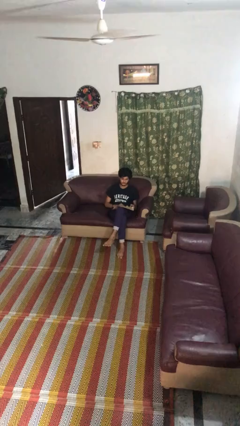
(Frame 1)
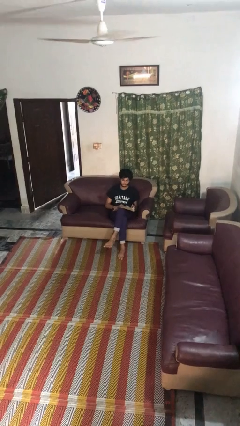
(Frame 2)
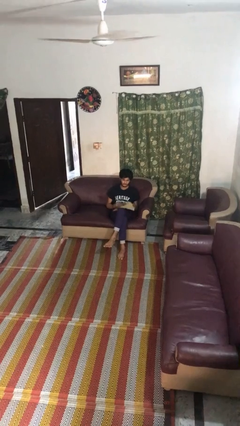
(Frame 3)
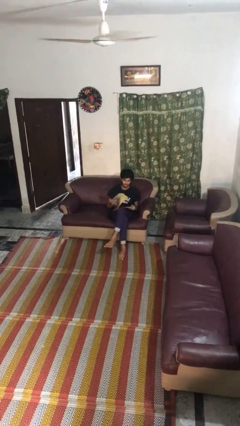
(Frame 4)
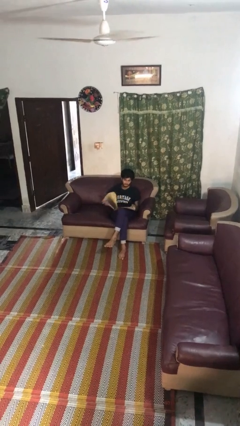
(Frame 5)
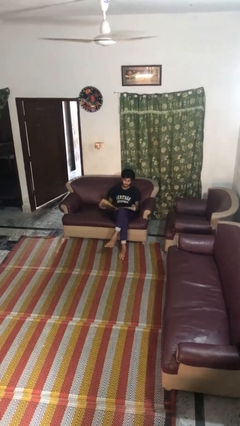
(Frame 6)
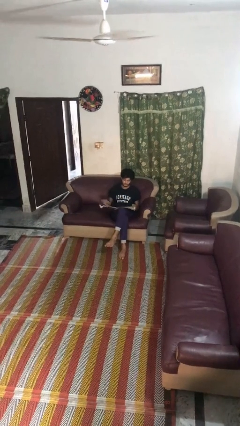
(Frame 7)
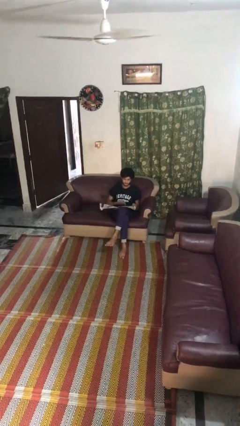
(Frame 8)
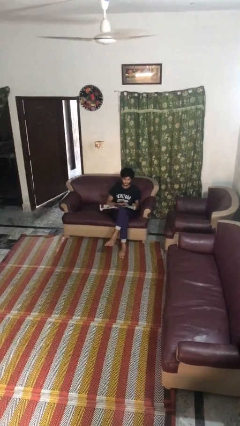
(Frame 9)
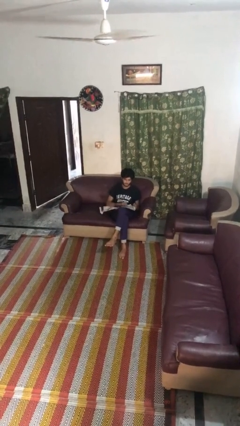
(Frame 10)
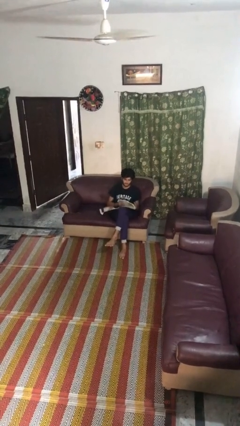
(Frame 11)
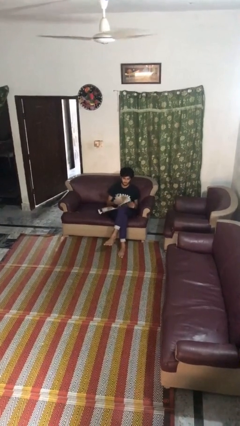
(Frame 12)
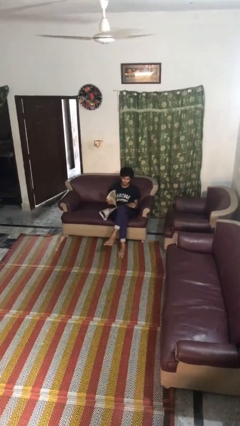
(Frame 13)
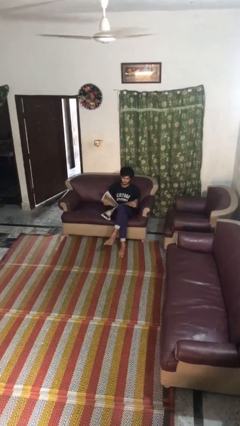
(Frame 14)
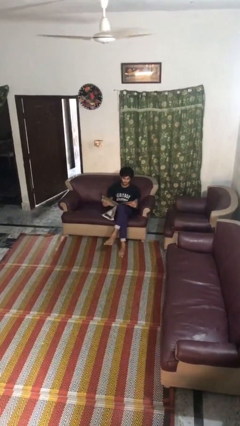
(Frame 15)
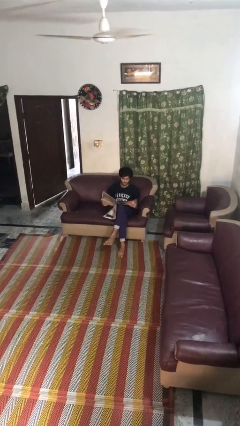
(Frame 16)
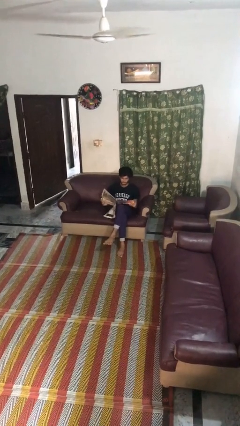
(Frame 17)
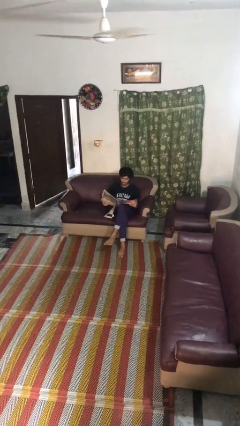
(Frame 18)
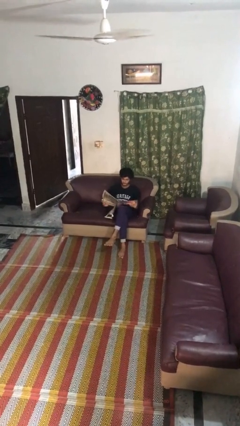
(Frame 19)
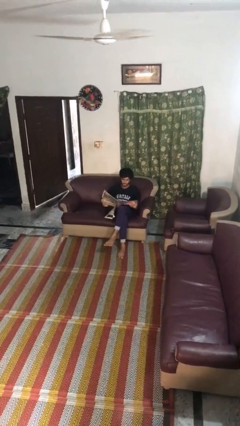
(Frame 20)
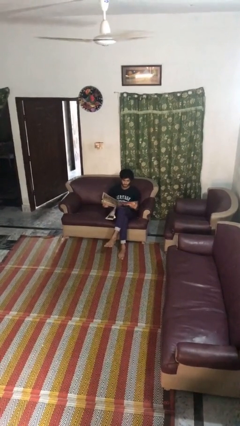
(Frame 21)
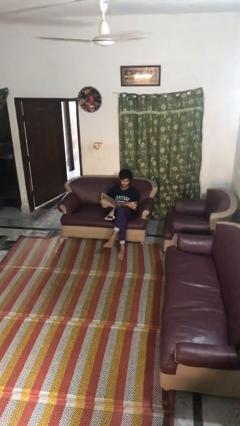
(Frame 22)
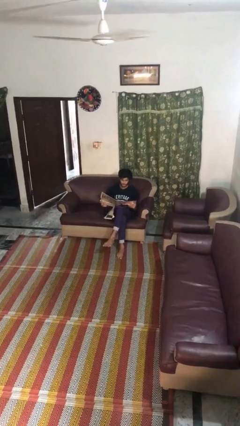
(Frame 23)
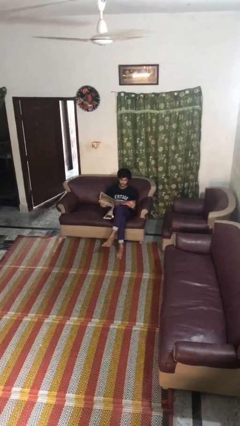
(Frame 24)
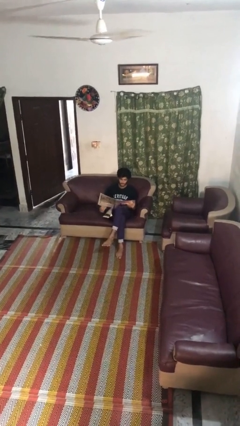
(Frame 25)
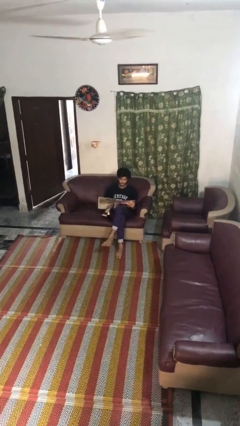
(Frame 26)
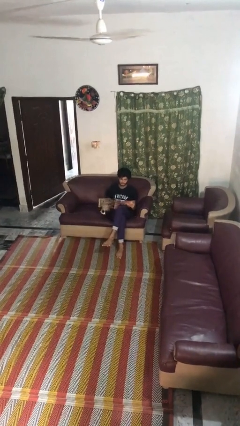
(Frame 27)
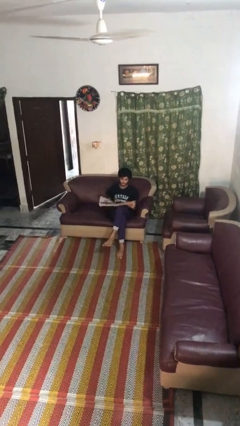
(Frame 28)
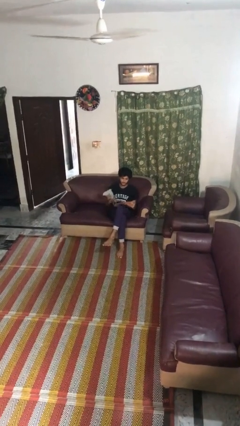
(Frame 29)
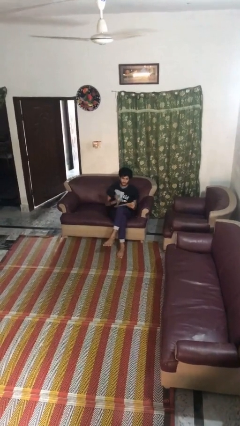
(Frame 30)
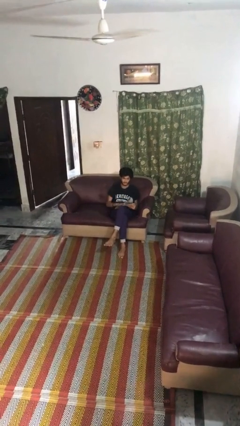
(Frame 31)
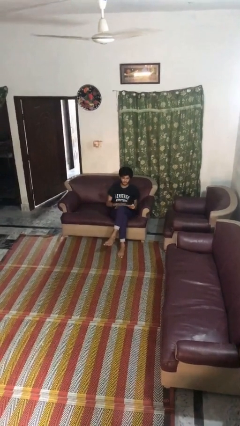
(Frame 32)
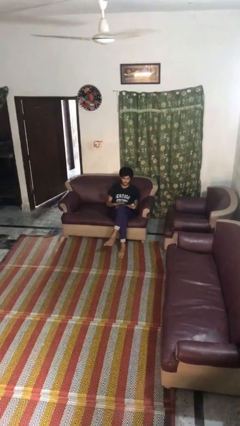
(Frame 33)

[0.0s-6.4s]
person reads magazine

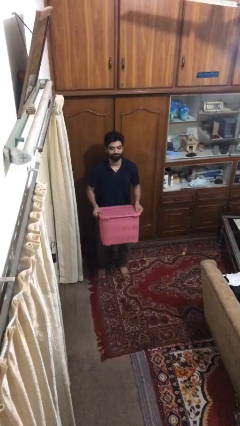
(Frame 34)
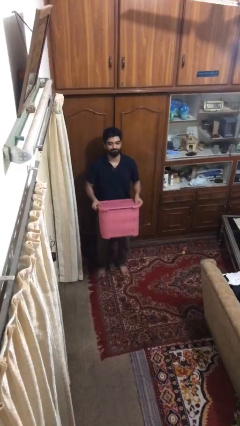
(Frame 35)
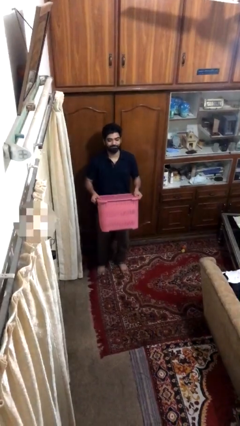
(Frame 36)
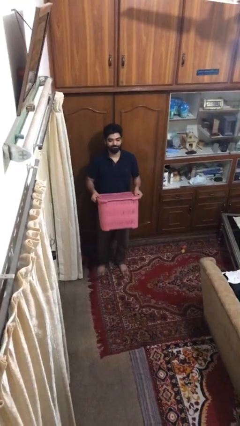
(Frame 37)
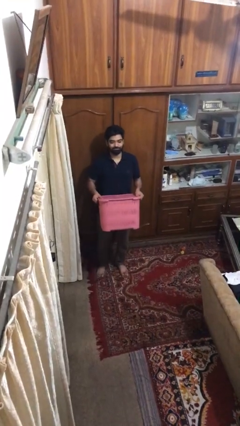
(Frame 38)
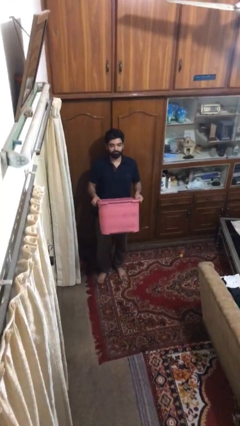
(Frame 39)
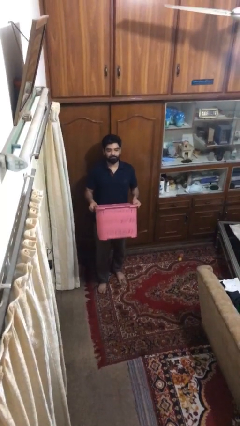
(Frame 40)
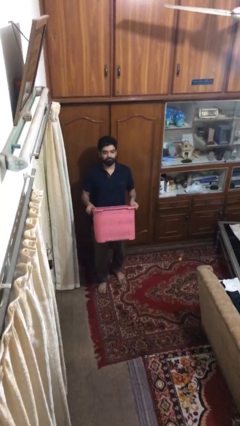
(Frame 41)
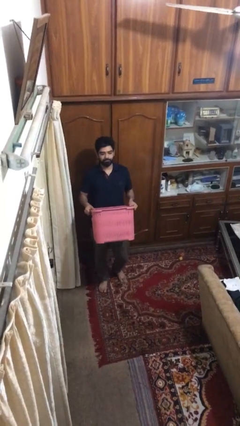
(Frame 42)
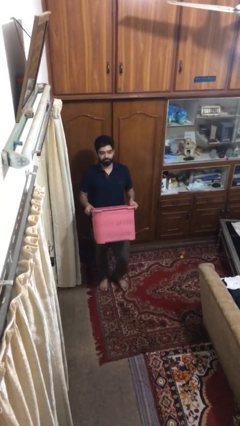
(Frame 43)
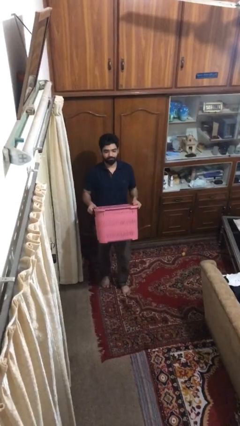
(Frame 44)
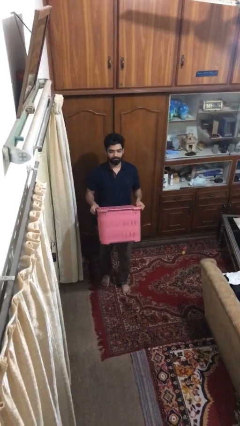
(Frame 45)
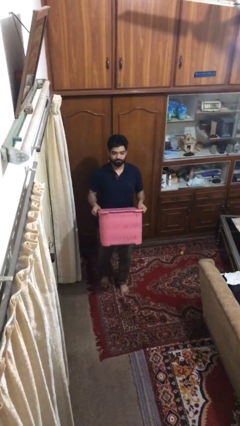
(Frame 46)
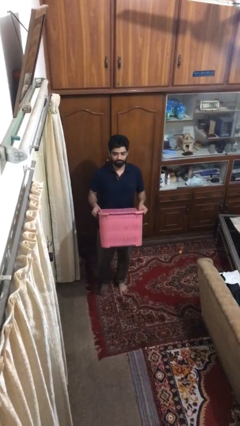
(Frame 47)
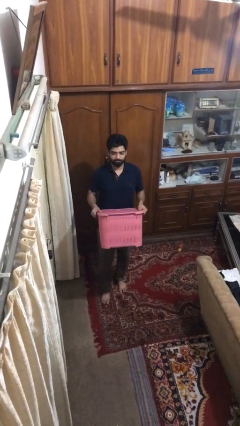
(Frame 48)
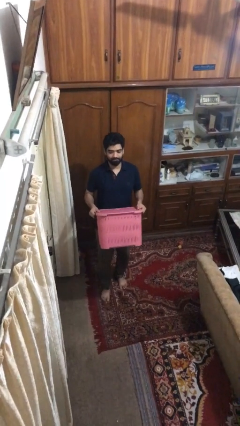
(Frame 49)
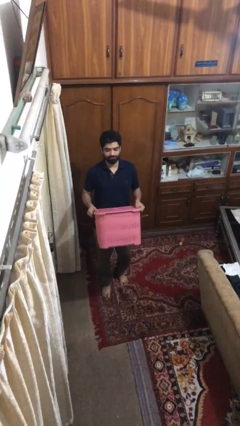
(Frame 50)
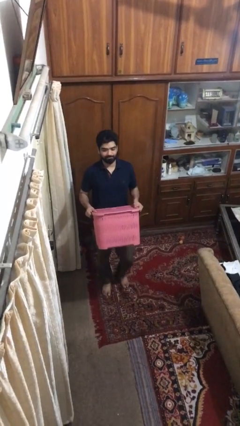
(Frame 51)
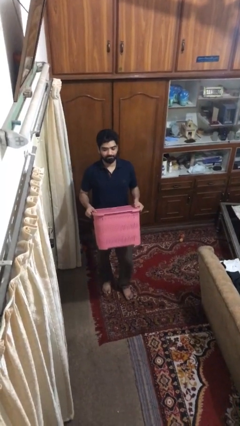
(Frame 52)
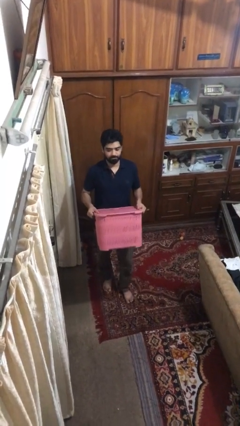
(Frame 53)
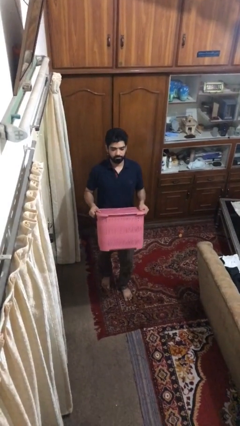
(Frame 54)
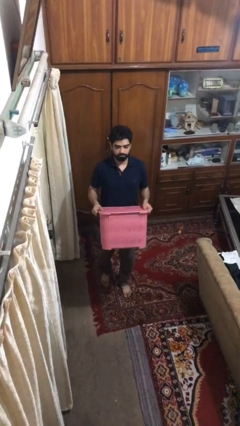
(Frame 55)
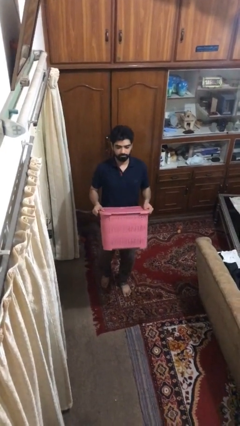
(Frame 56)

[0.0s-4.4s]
person carries heavy object

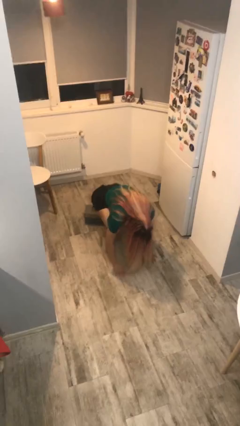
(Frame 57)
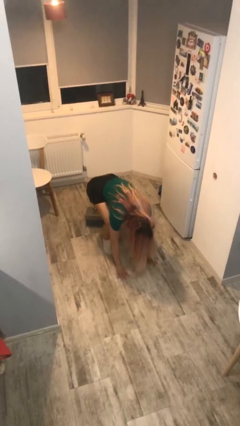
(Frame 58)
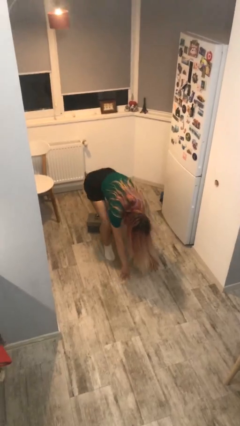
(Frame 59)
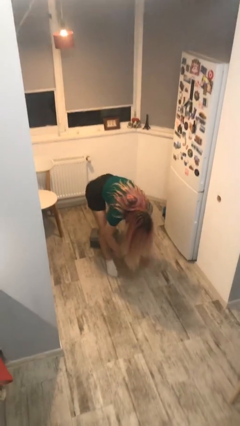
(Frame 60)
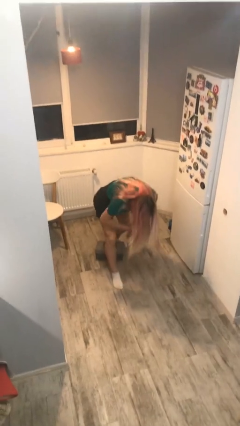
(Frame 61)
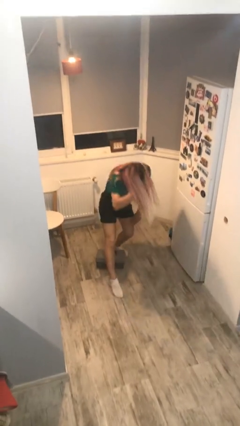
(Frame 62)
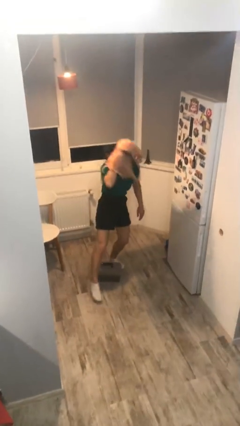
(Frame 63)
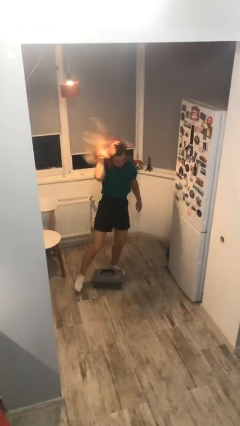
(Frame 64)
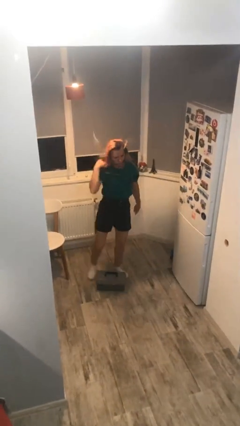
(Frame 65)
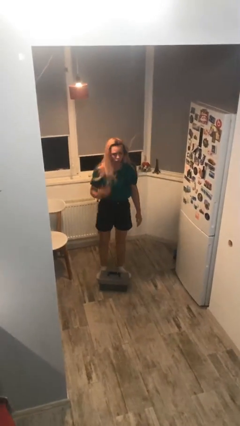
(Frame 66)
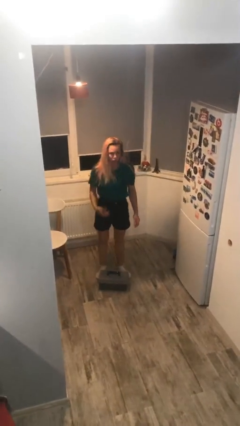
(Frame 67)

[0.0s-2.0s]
person stands up from floor

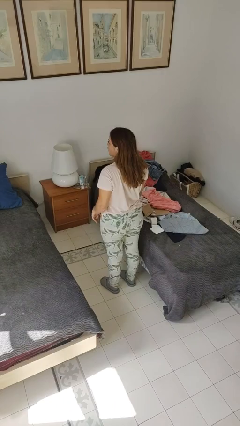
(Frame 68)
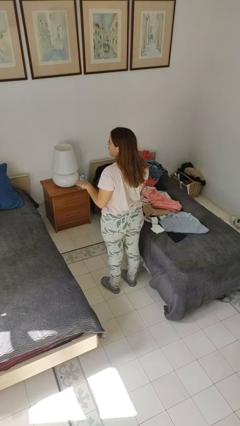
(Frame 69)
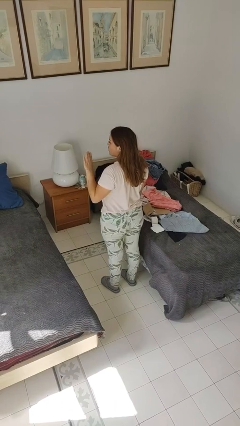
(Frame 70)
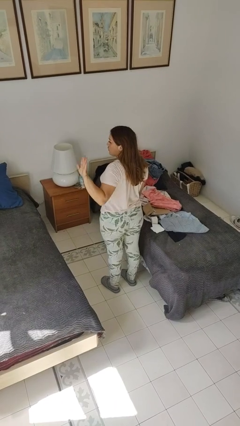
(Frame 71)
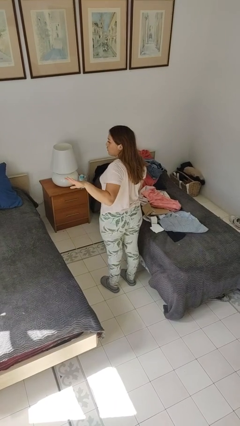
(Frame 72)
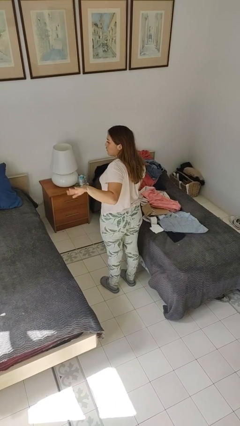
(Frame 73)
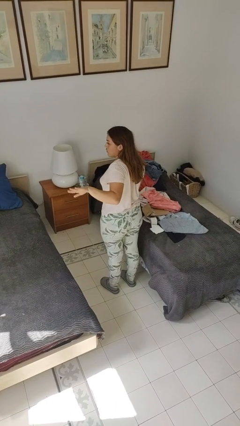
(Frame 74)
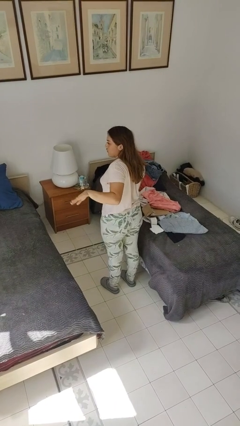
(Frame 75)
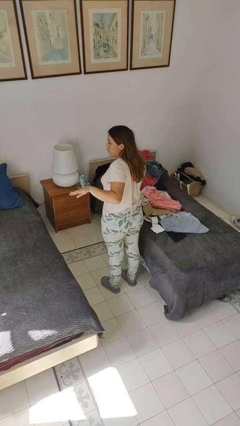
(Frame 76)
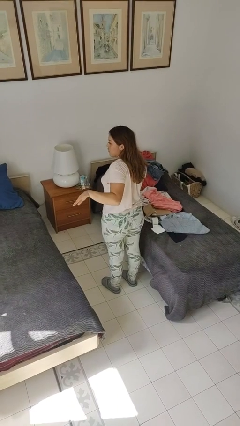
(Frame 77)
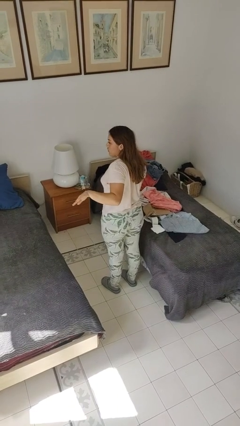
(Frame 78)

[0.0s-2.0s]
person gestures behind me

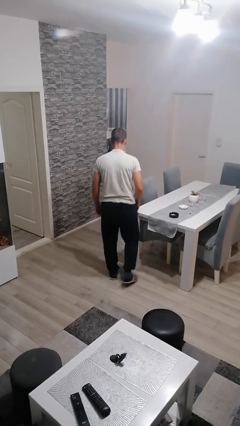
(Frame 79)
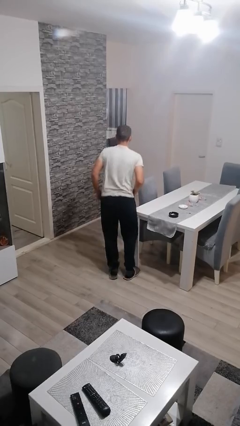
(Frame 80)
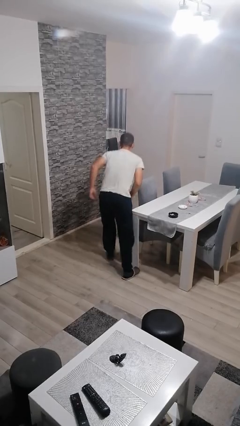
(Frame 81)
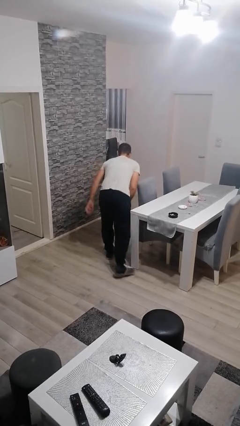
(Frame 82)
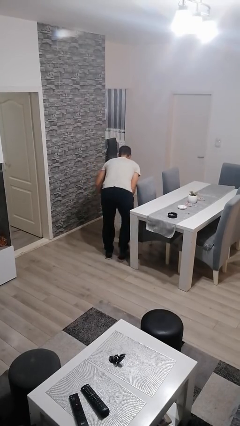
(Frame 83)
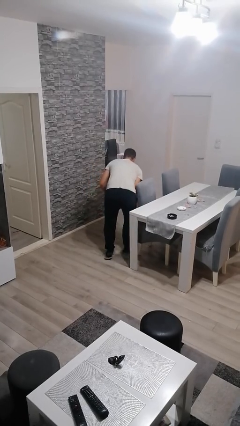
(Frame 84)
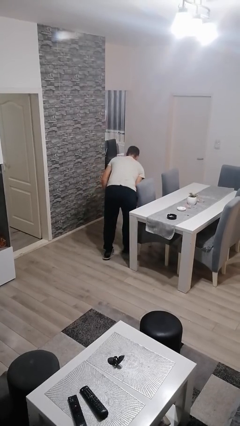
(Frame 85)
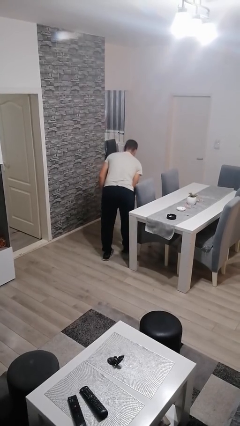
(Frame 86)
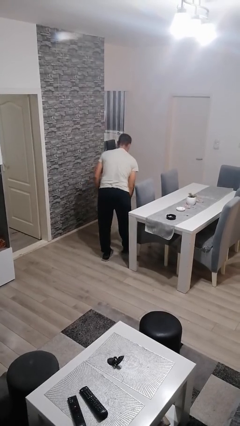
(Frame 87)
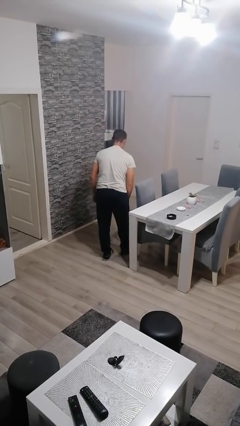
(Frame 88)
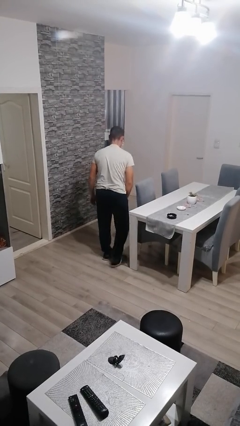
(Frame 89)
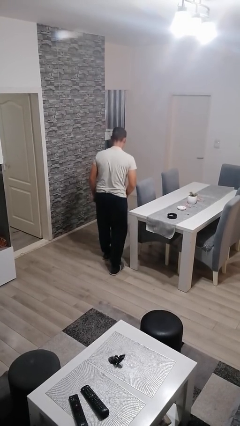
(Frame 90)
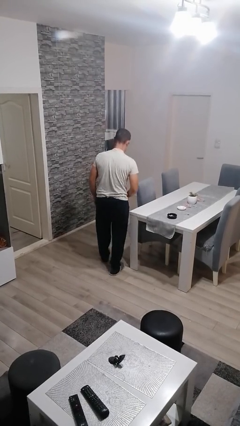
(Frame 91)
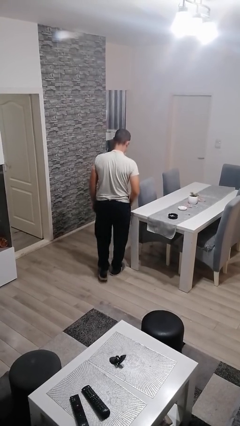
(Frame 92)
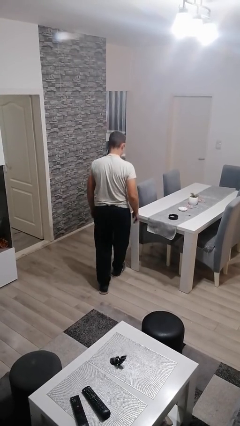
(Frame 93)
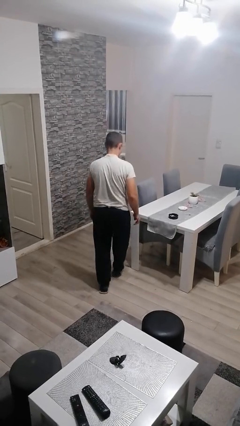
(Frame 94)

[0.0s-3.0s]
person bumps into table
